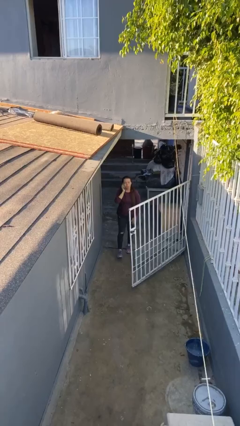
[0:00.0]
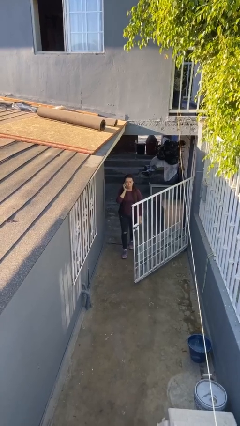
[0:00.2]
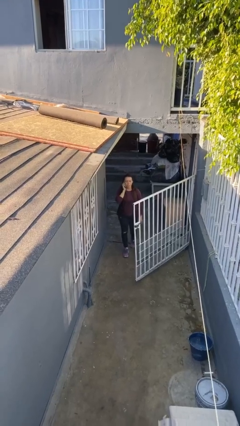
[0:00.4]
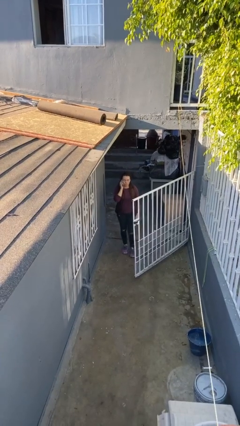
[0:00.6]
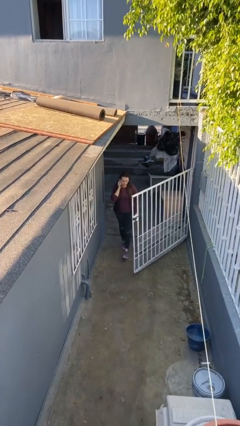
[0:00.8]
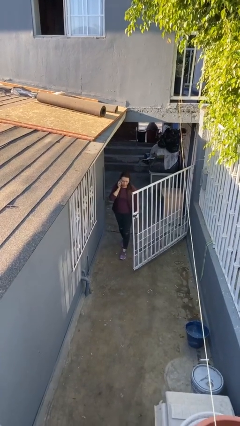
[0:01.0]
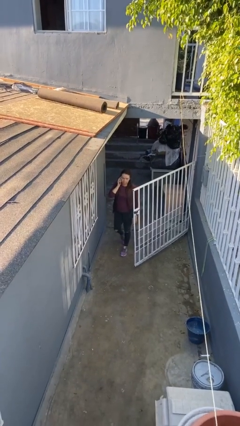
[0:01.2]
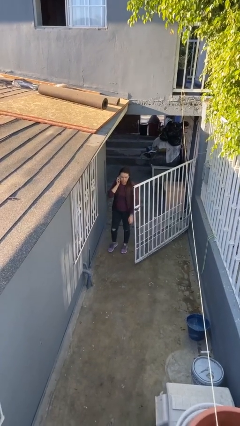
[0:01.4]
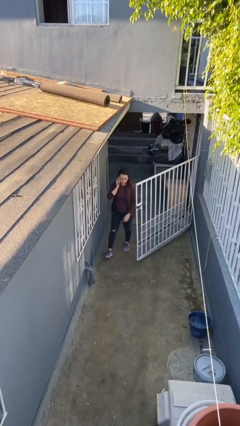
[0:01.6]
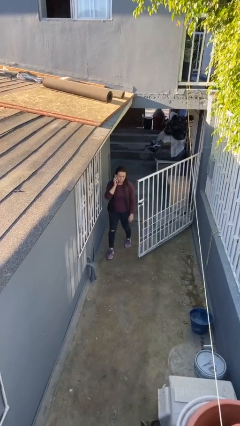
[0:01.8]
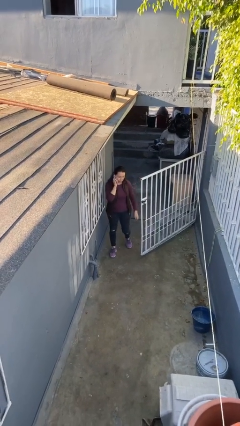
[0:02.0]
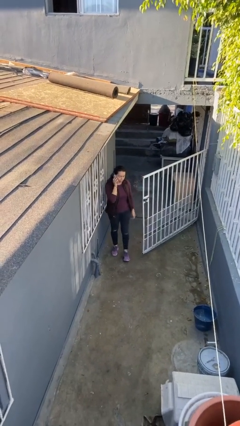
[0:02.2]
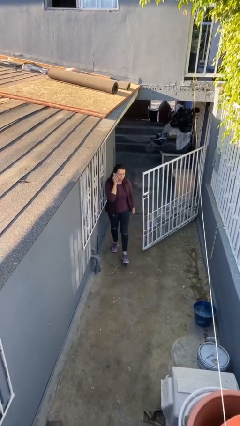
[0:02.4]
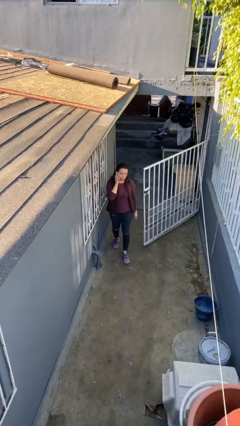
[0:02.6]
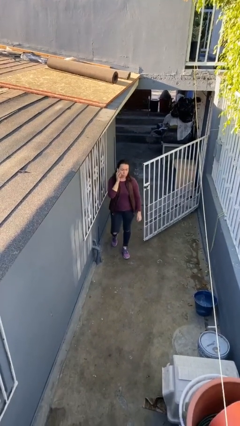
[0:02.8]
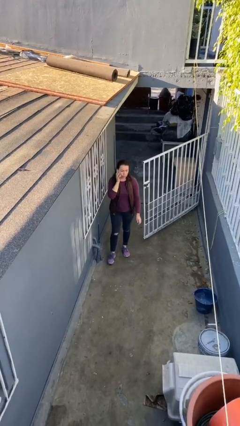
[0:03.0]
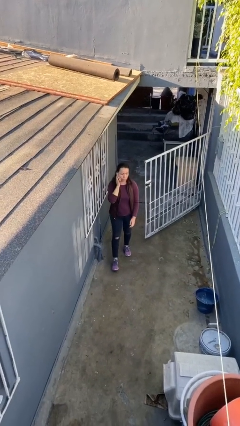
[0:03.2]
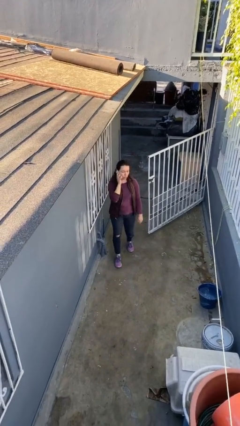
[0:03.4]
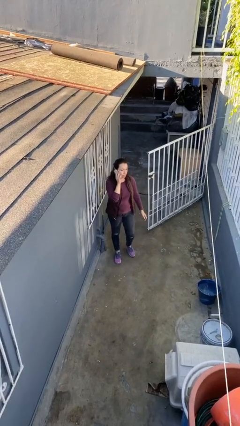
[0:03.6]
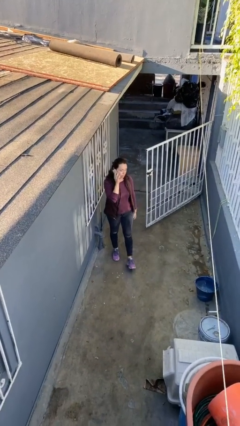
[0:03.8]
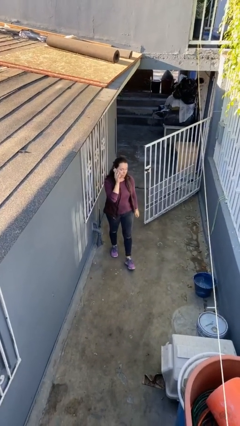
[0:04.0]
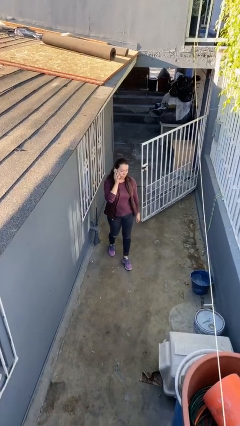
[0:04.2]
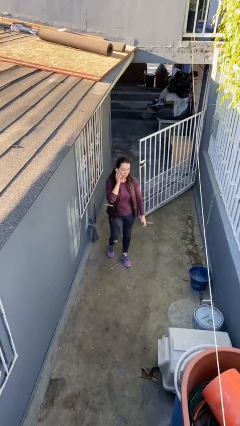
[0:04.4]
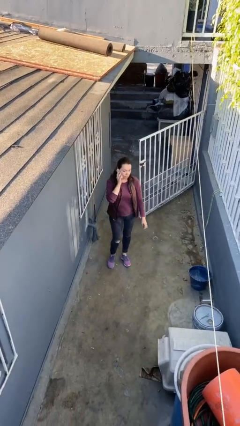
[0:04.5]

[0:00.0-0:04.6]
person enters scene through structure

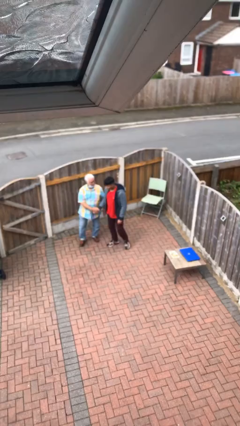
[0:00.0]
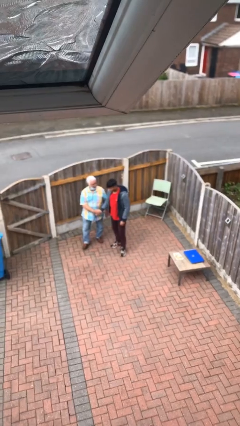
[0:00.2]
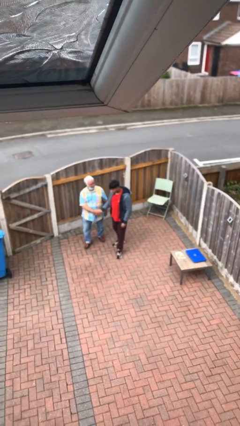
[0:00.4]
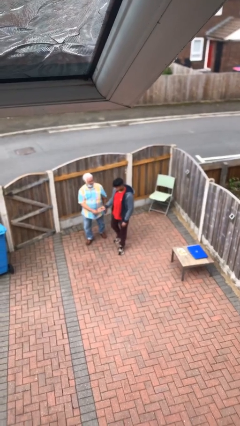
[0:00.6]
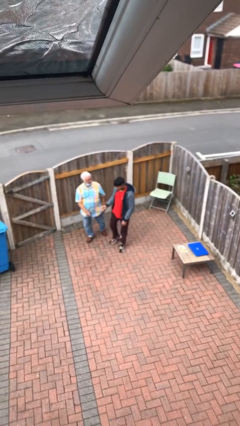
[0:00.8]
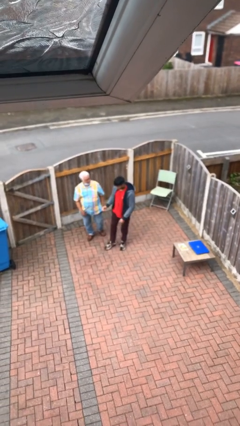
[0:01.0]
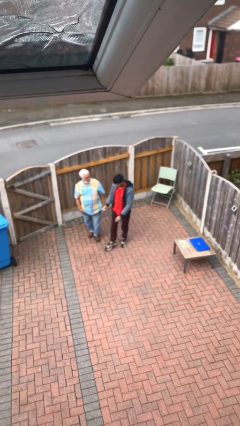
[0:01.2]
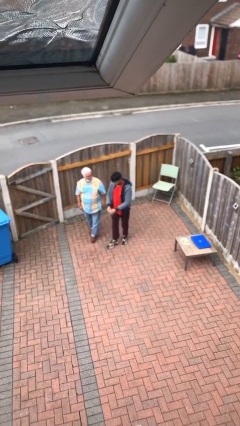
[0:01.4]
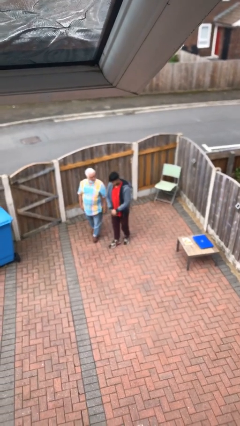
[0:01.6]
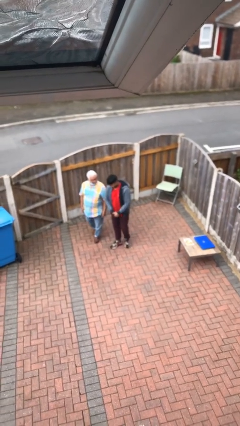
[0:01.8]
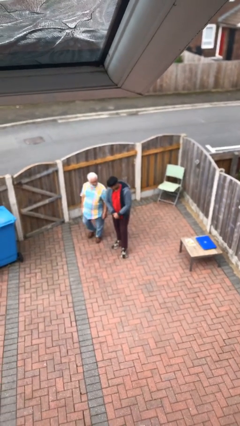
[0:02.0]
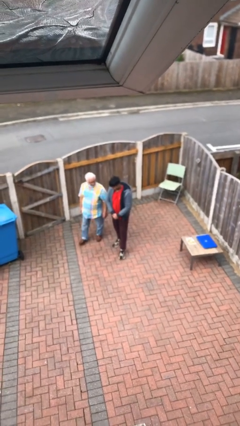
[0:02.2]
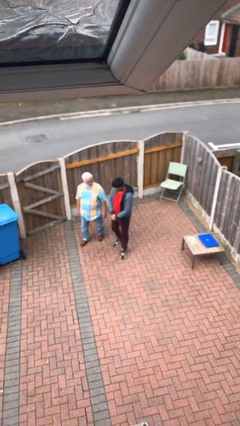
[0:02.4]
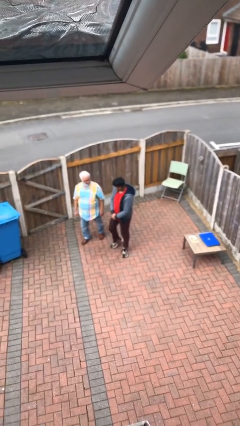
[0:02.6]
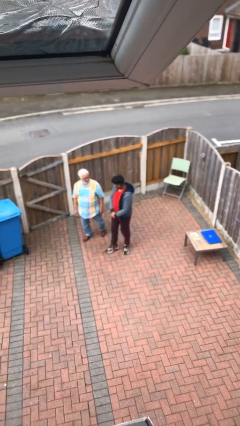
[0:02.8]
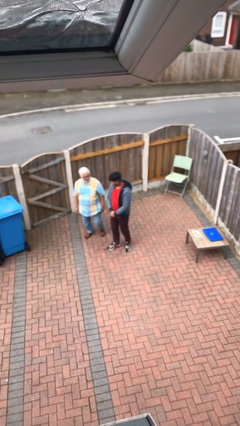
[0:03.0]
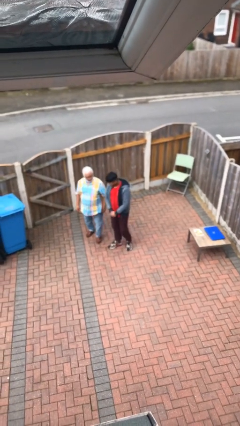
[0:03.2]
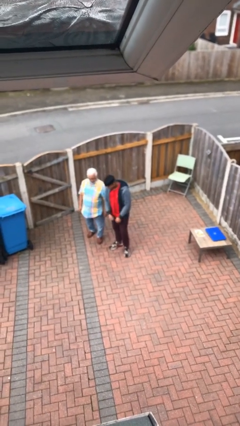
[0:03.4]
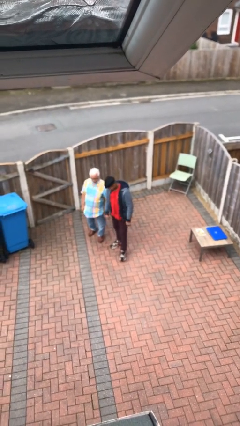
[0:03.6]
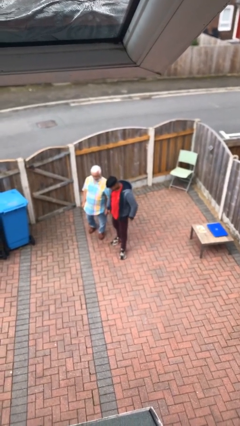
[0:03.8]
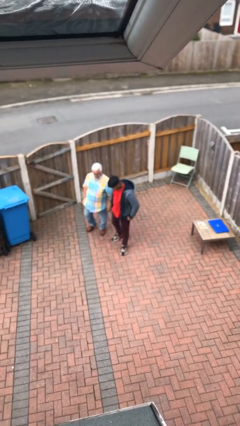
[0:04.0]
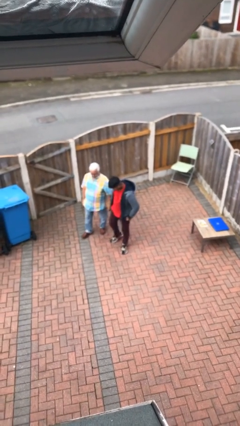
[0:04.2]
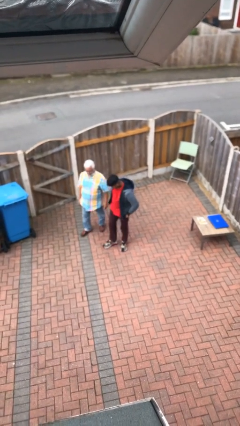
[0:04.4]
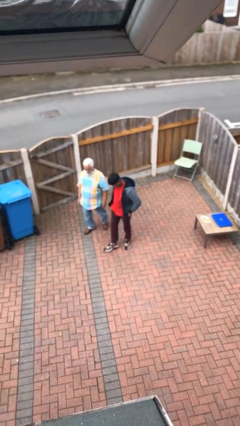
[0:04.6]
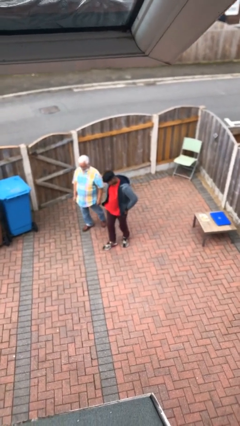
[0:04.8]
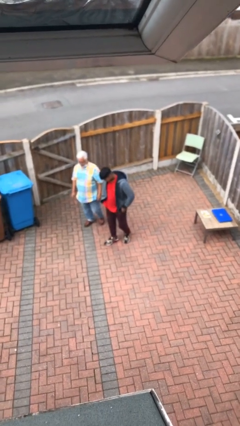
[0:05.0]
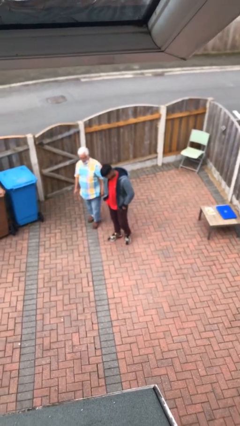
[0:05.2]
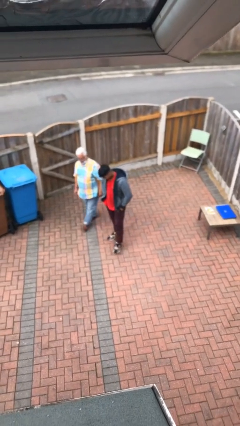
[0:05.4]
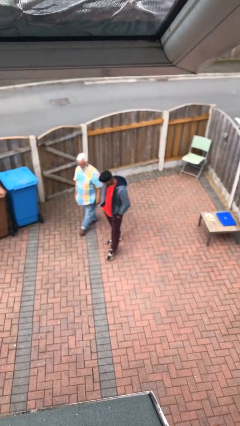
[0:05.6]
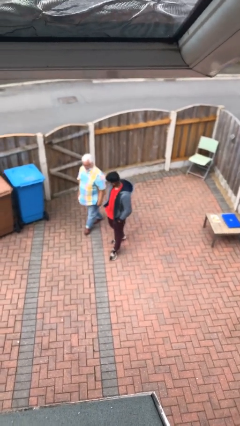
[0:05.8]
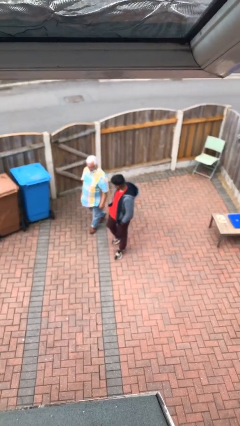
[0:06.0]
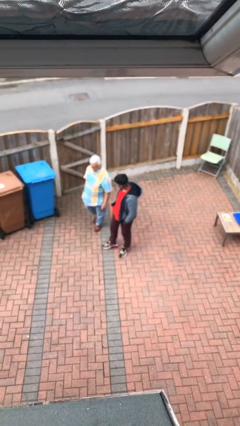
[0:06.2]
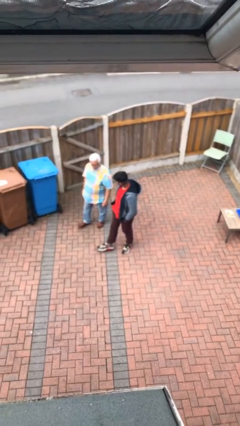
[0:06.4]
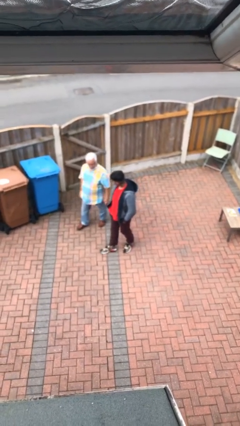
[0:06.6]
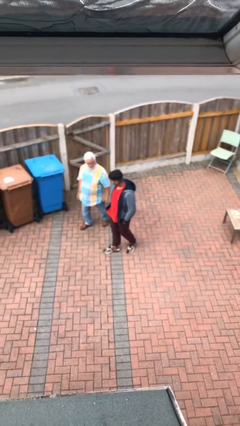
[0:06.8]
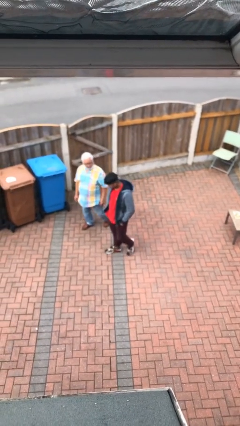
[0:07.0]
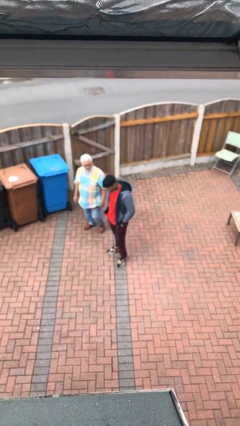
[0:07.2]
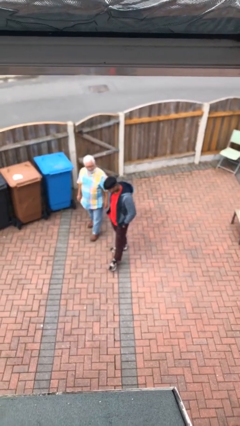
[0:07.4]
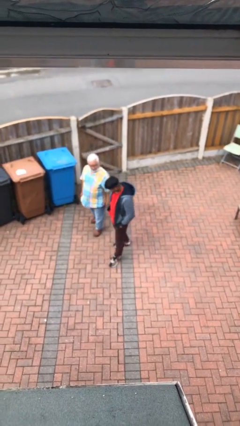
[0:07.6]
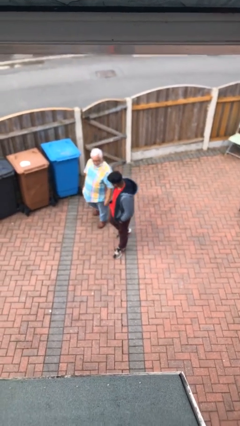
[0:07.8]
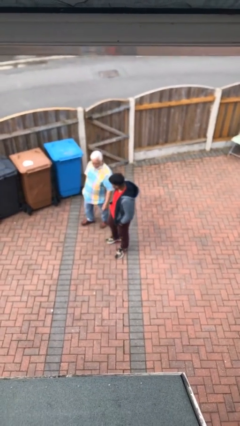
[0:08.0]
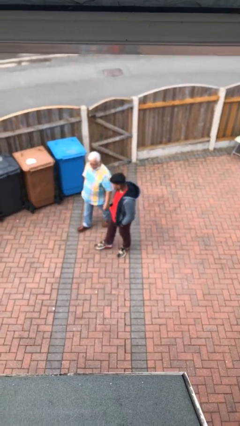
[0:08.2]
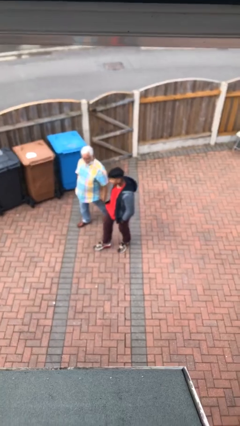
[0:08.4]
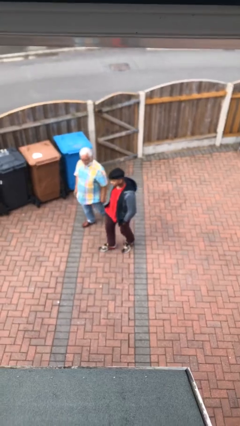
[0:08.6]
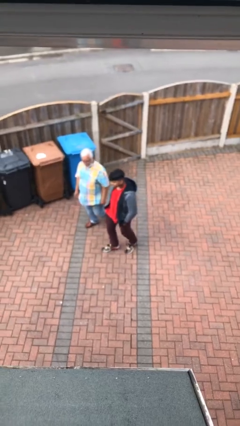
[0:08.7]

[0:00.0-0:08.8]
person talks to person

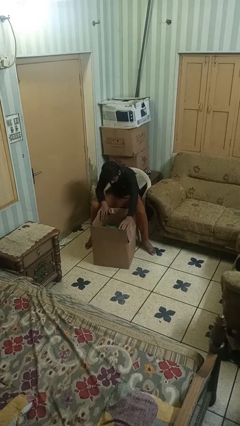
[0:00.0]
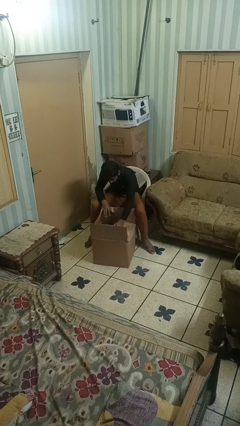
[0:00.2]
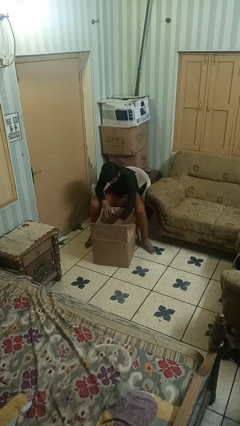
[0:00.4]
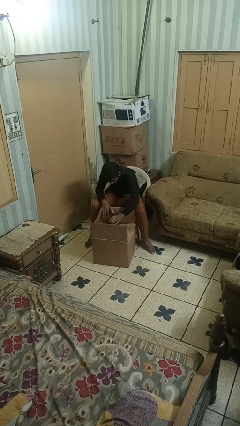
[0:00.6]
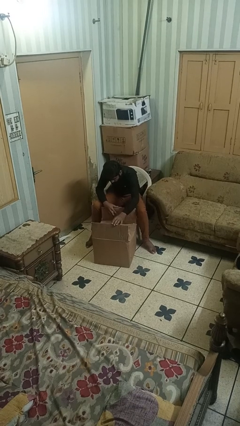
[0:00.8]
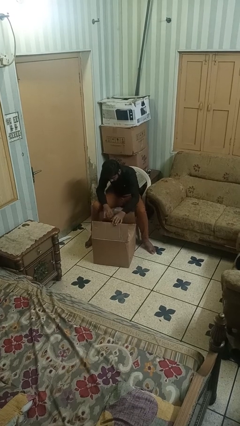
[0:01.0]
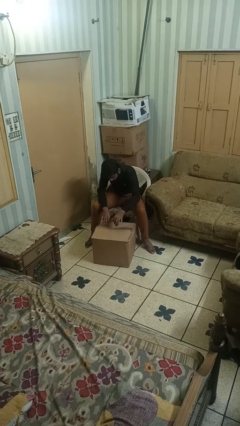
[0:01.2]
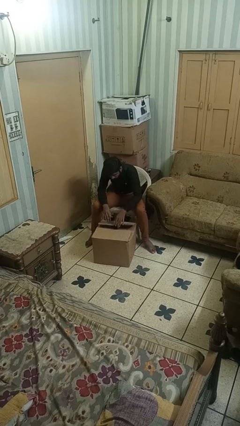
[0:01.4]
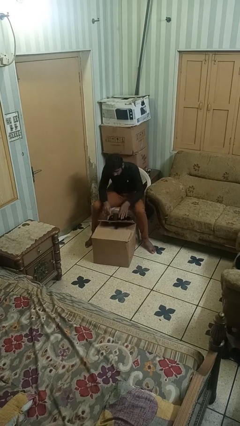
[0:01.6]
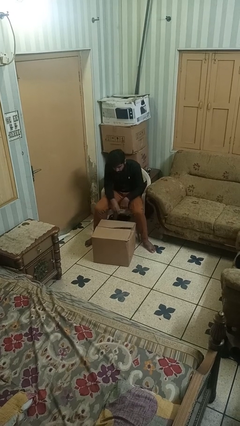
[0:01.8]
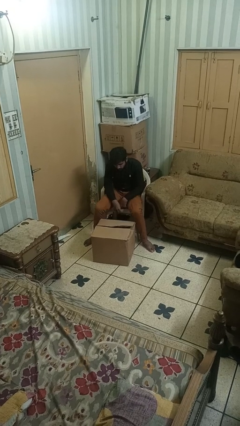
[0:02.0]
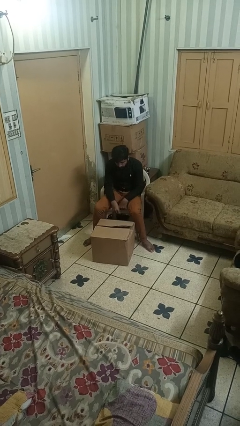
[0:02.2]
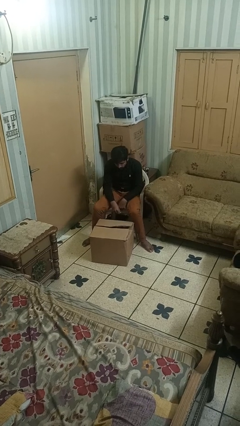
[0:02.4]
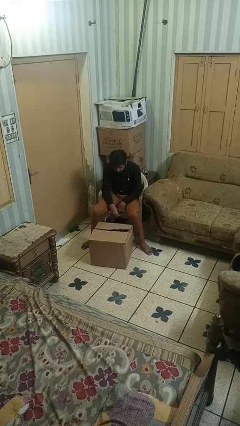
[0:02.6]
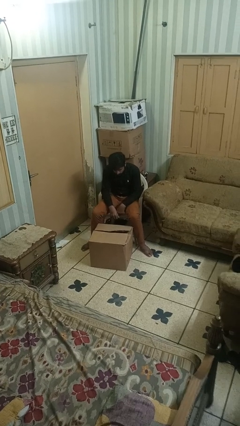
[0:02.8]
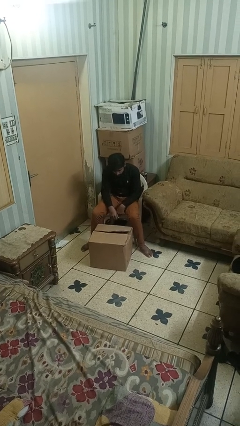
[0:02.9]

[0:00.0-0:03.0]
person closes box

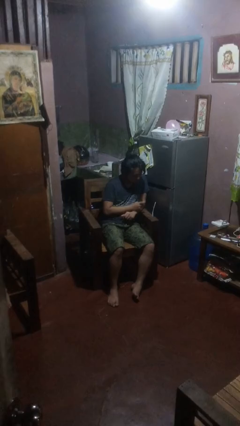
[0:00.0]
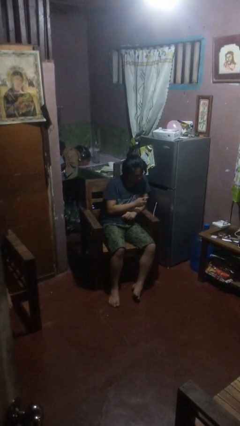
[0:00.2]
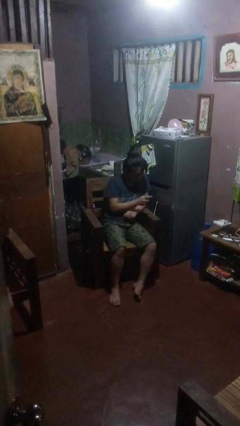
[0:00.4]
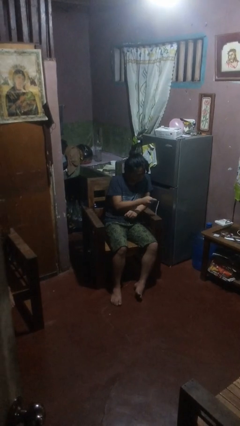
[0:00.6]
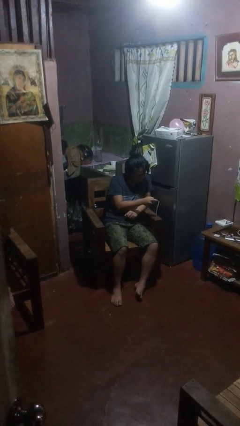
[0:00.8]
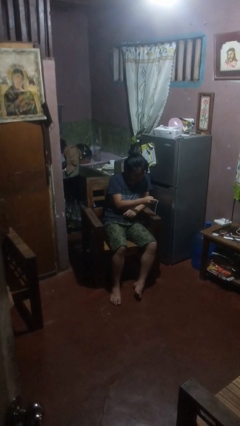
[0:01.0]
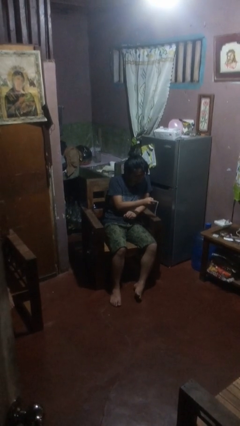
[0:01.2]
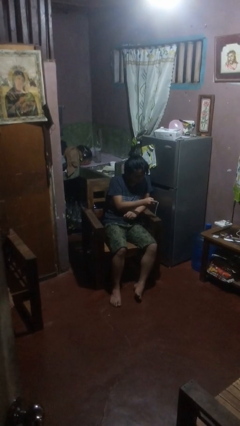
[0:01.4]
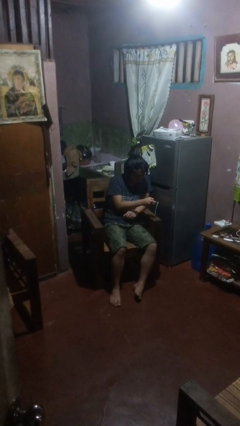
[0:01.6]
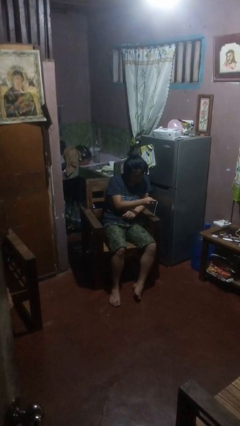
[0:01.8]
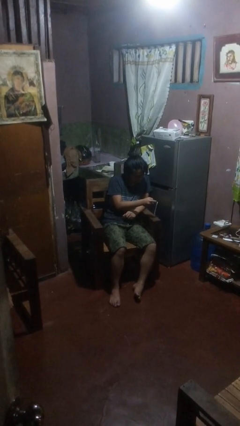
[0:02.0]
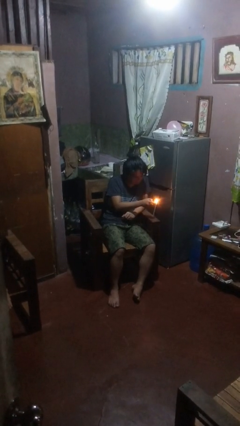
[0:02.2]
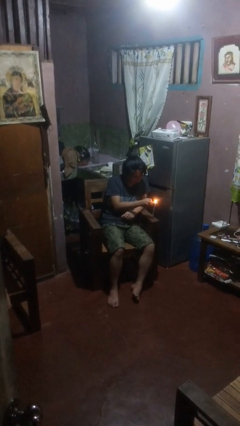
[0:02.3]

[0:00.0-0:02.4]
person lights candle
